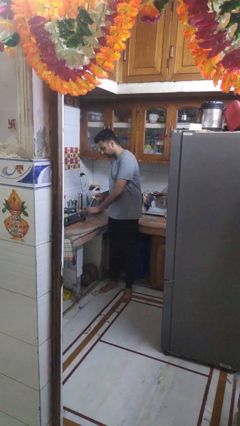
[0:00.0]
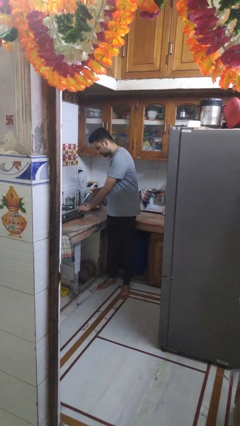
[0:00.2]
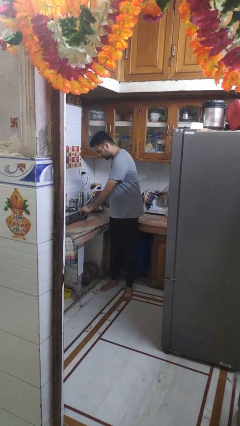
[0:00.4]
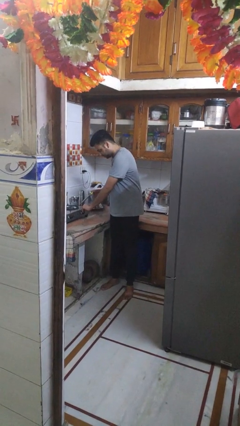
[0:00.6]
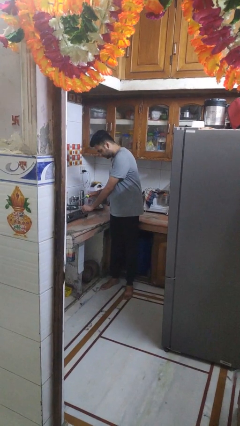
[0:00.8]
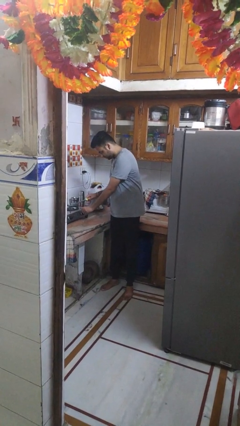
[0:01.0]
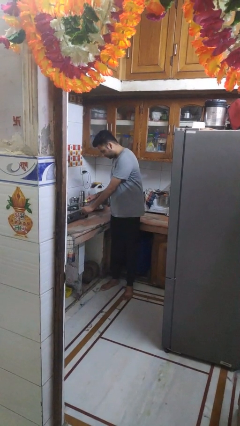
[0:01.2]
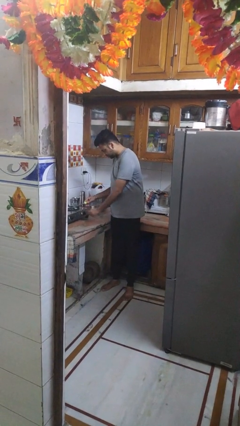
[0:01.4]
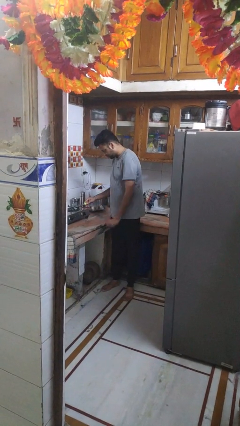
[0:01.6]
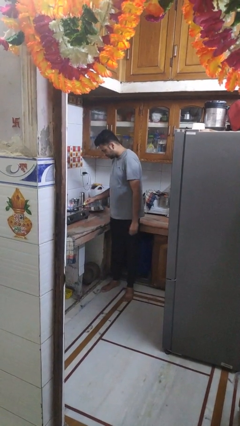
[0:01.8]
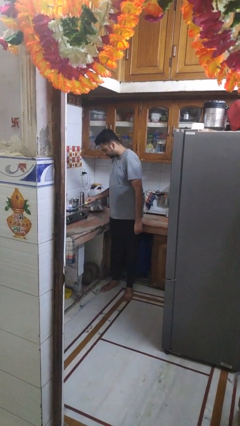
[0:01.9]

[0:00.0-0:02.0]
person turns on stovetop

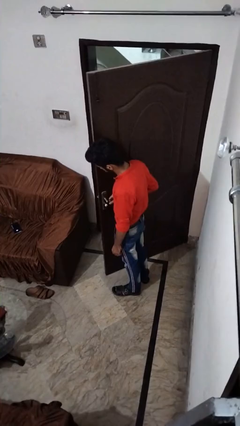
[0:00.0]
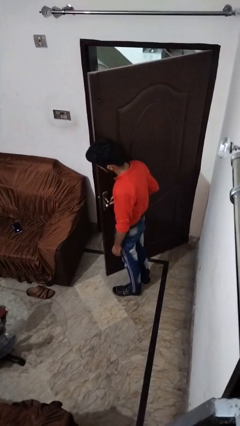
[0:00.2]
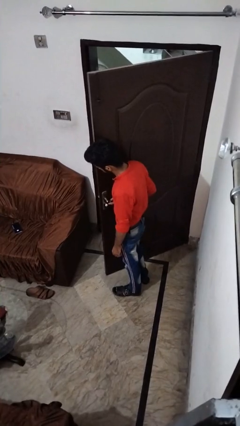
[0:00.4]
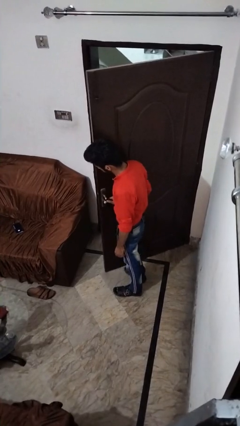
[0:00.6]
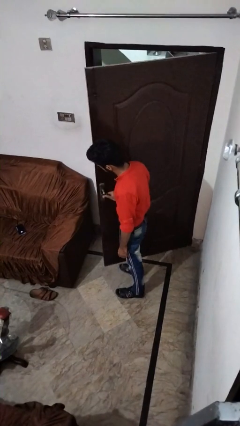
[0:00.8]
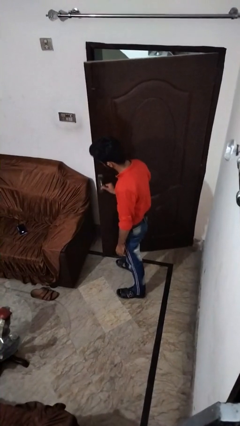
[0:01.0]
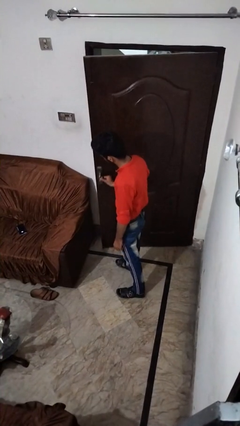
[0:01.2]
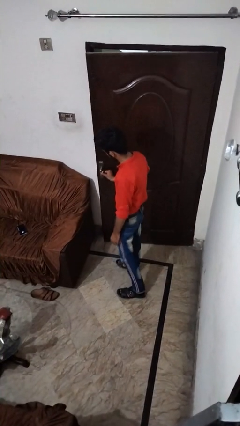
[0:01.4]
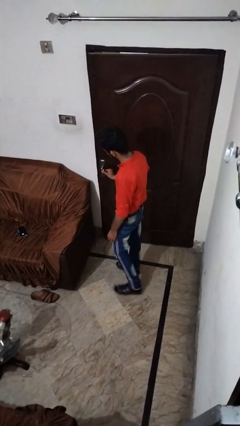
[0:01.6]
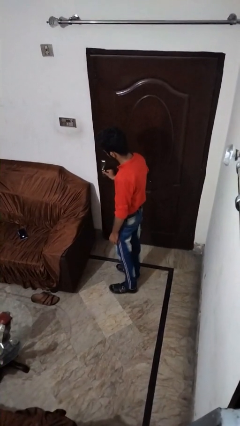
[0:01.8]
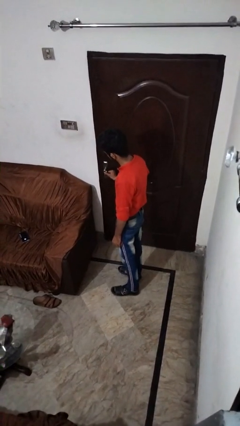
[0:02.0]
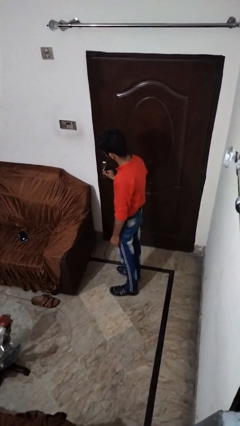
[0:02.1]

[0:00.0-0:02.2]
person closes facility door

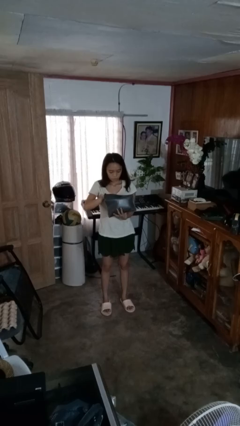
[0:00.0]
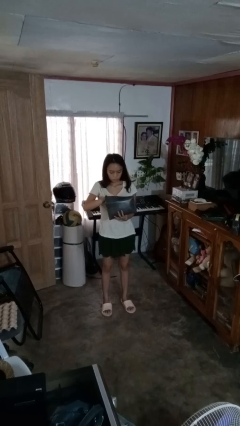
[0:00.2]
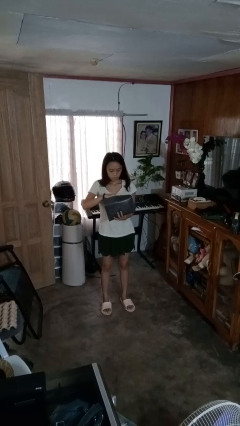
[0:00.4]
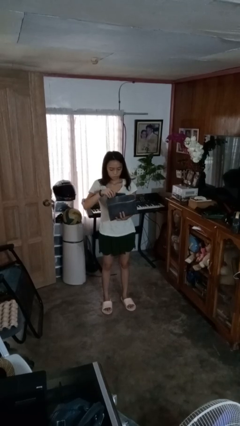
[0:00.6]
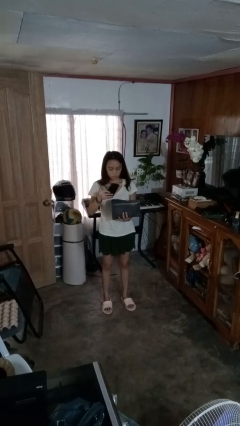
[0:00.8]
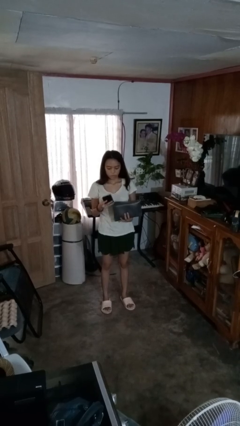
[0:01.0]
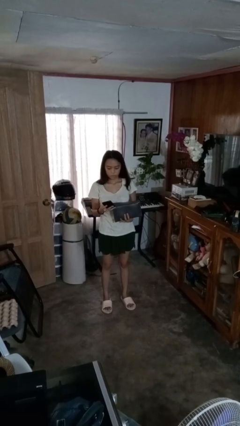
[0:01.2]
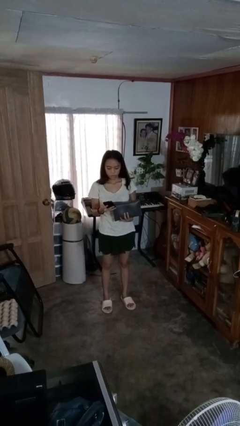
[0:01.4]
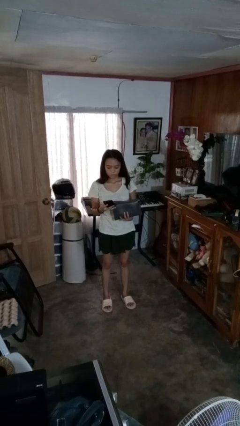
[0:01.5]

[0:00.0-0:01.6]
person takes object from purse

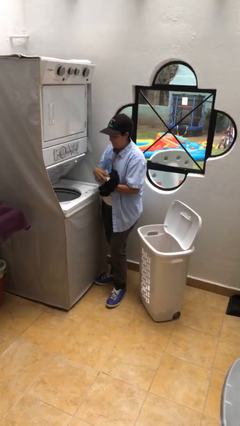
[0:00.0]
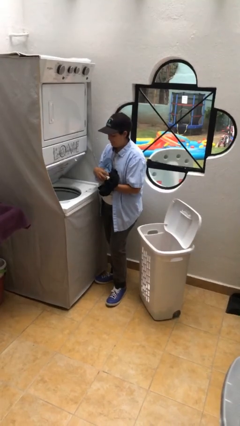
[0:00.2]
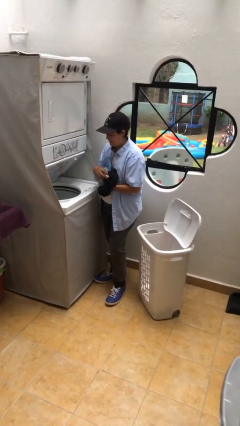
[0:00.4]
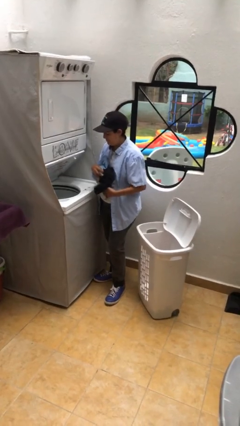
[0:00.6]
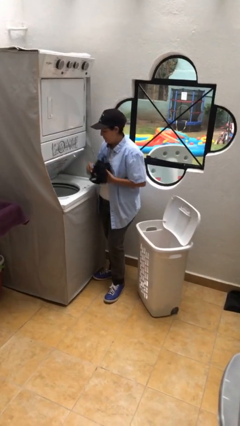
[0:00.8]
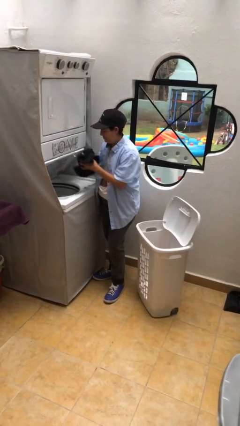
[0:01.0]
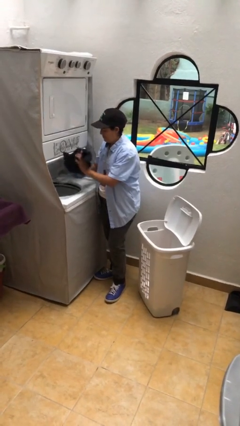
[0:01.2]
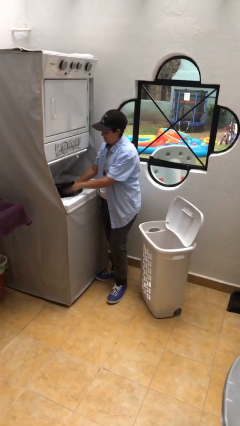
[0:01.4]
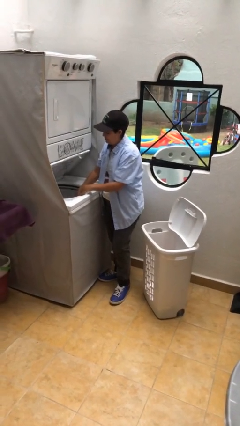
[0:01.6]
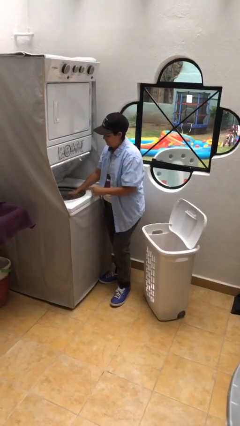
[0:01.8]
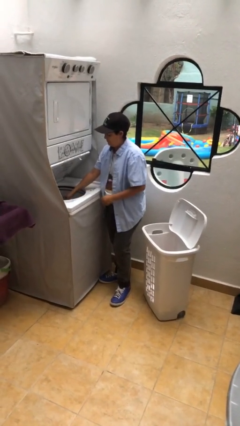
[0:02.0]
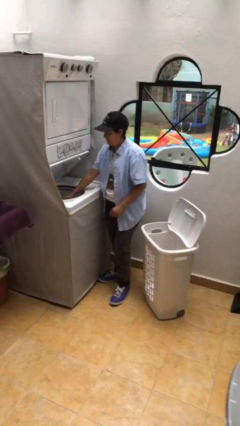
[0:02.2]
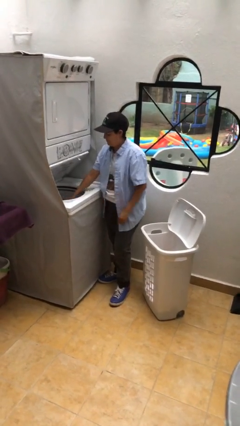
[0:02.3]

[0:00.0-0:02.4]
person loads clotheswasher

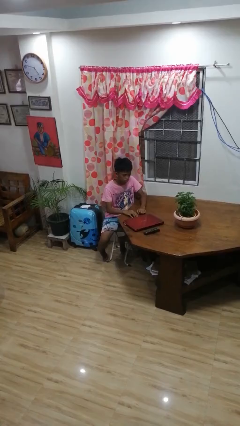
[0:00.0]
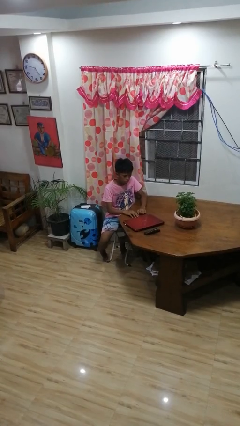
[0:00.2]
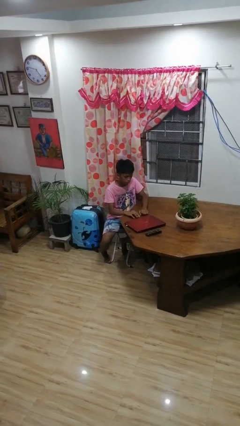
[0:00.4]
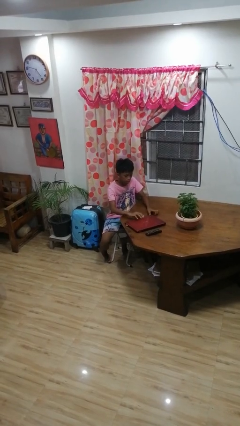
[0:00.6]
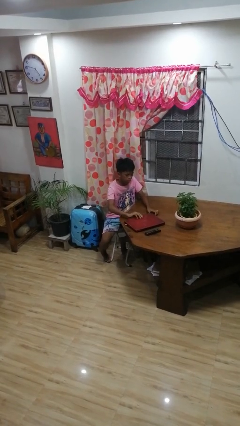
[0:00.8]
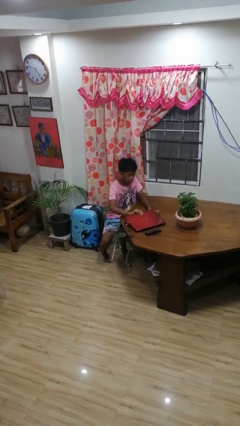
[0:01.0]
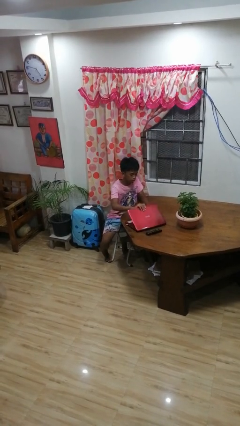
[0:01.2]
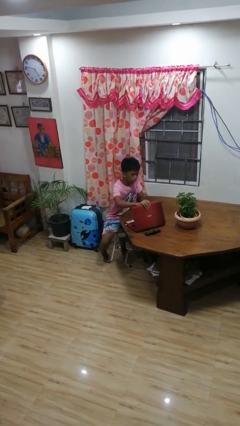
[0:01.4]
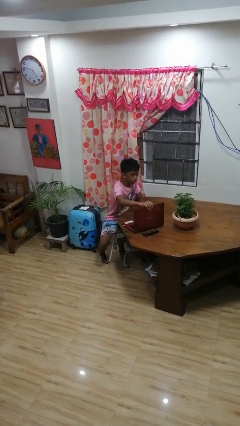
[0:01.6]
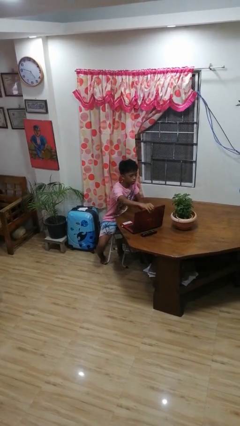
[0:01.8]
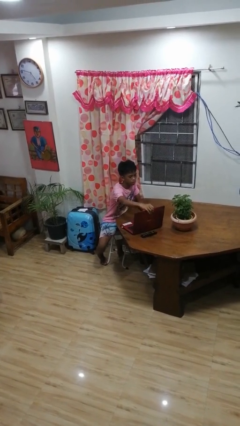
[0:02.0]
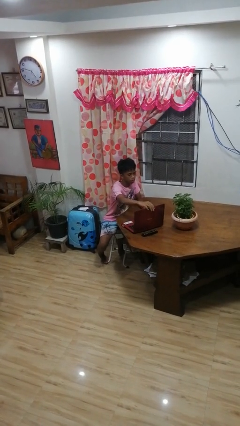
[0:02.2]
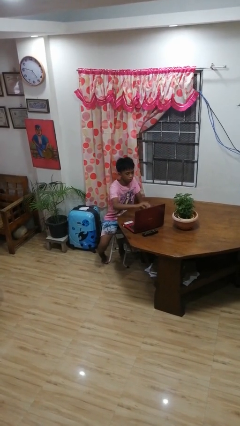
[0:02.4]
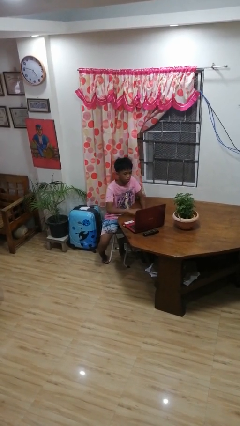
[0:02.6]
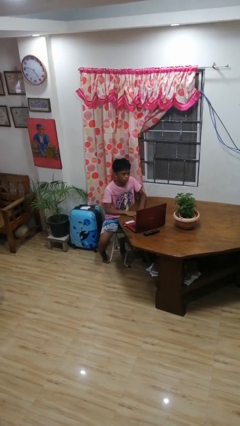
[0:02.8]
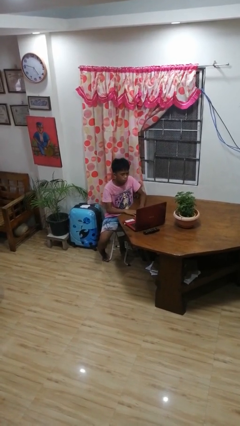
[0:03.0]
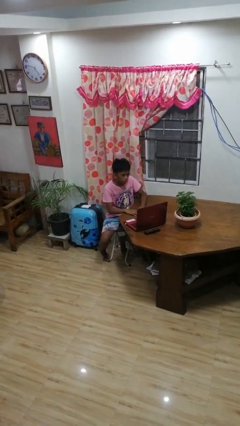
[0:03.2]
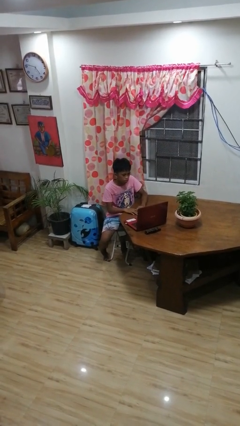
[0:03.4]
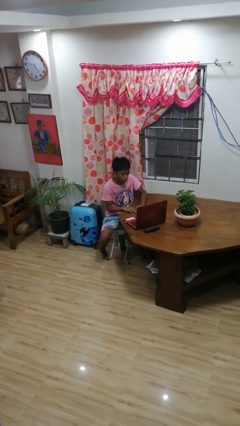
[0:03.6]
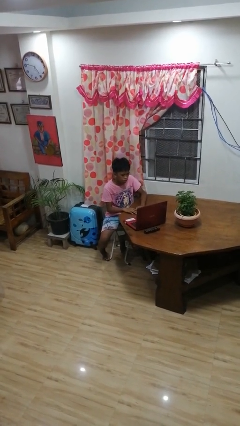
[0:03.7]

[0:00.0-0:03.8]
person opens laptop

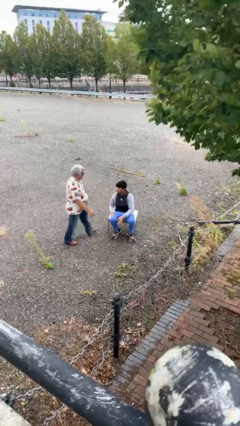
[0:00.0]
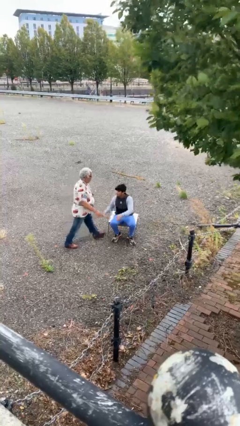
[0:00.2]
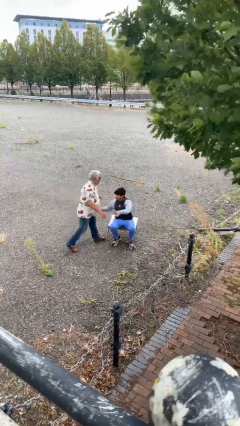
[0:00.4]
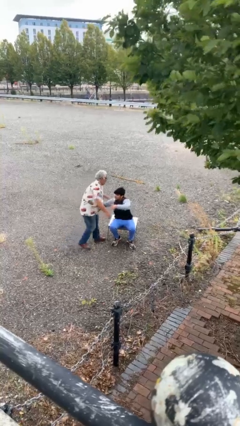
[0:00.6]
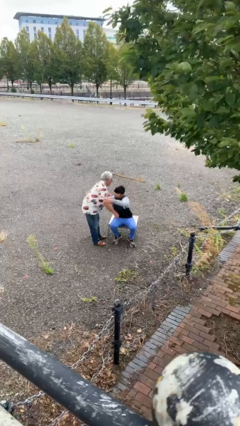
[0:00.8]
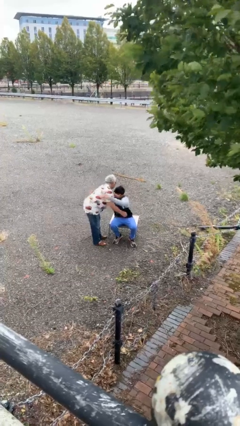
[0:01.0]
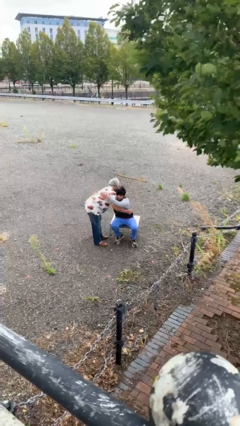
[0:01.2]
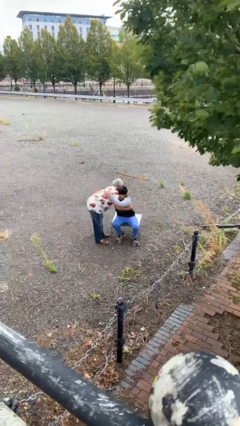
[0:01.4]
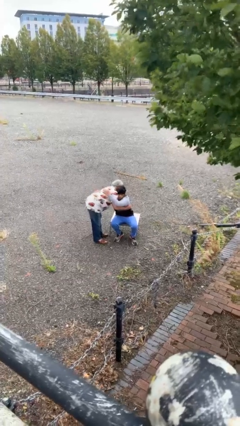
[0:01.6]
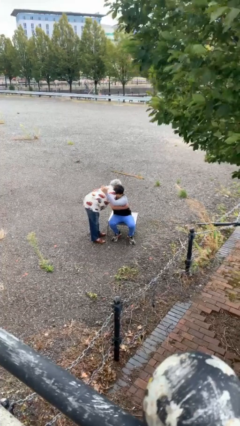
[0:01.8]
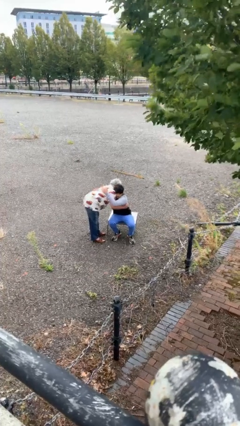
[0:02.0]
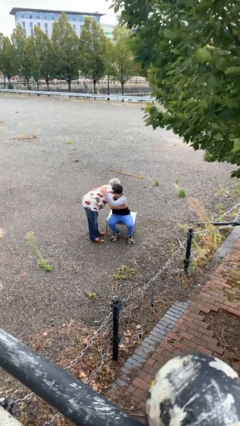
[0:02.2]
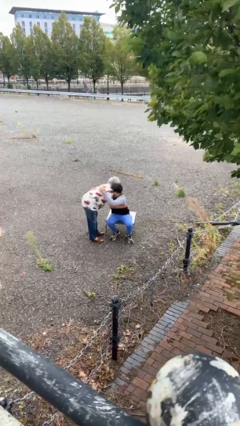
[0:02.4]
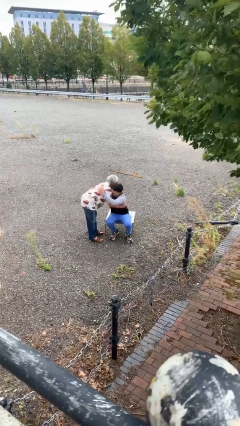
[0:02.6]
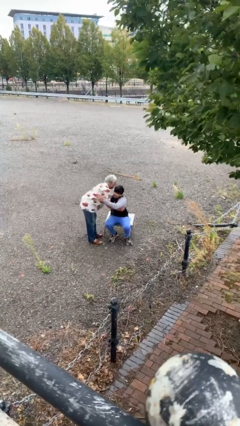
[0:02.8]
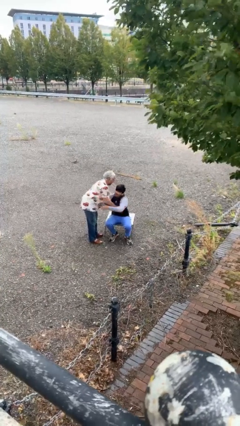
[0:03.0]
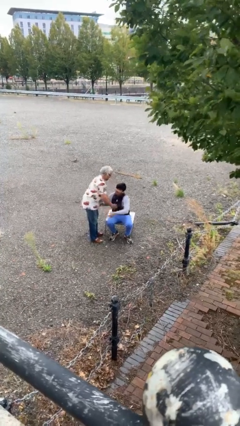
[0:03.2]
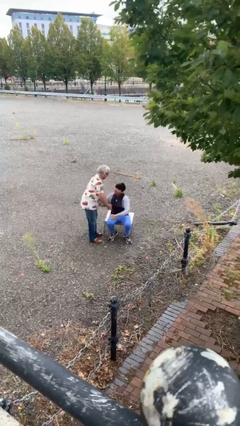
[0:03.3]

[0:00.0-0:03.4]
person embraces person

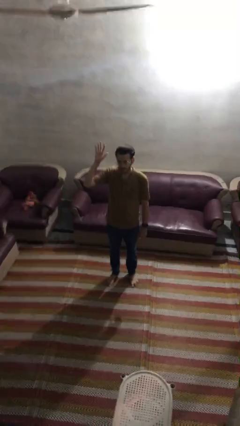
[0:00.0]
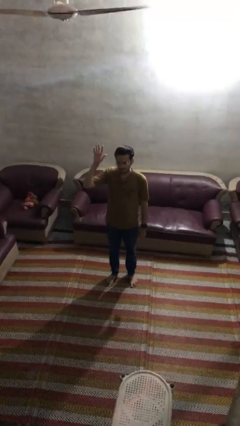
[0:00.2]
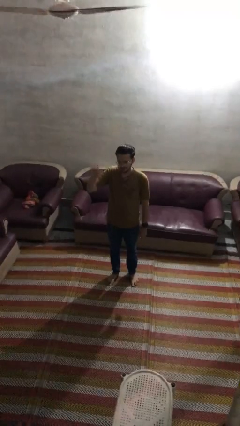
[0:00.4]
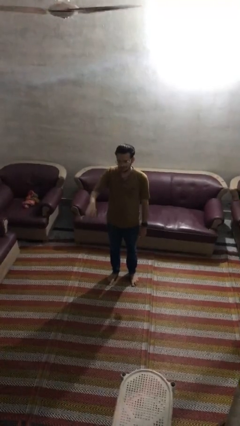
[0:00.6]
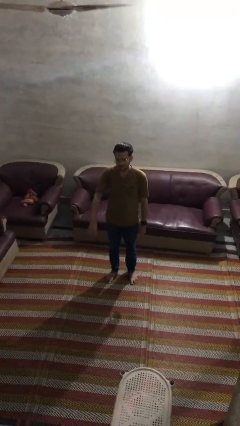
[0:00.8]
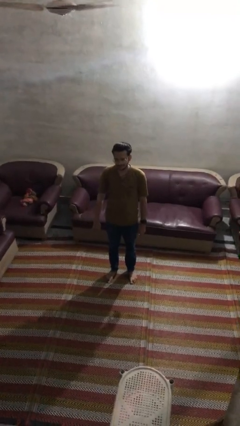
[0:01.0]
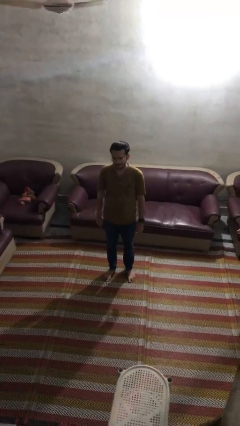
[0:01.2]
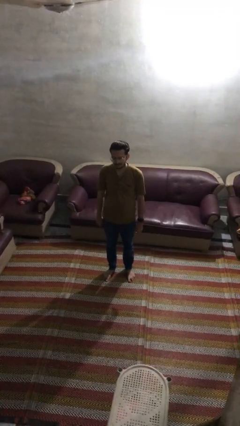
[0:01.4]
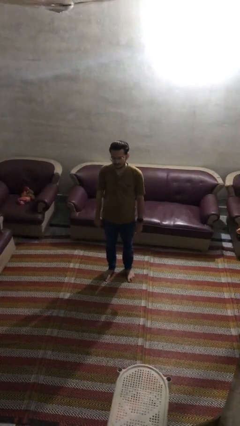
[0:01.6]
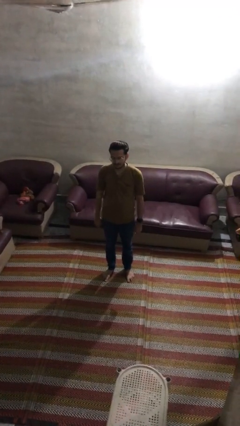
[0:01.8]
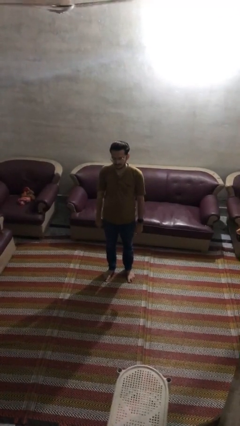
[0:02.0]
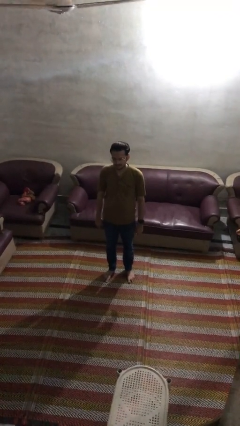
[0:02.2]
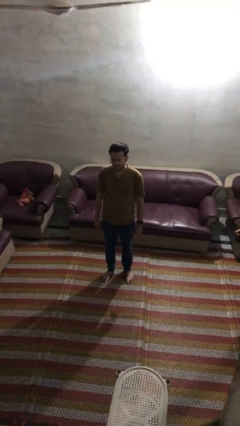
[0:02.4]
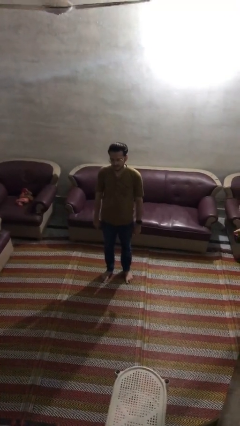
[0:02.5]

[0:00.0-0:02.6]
person gestures lower hand
